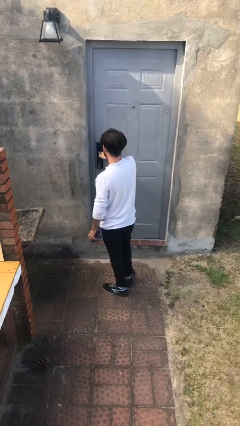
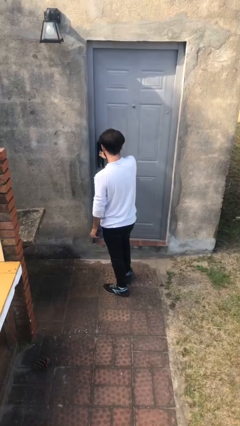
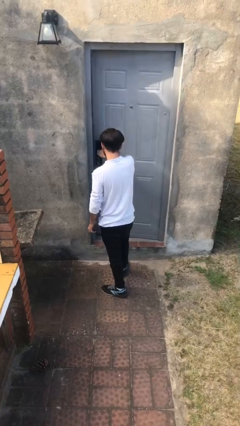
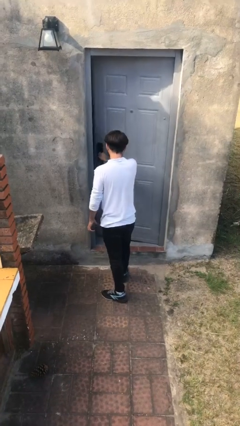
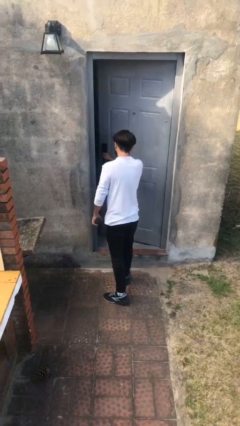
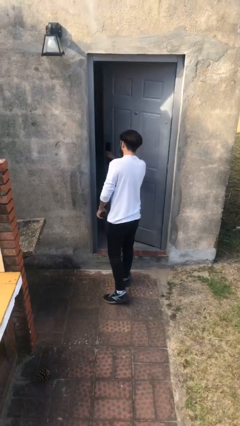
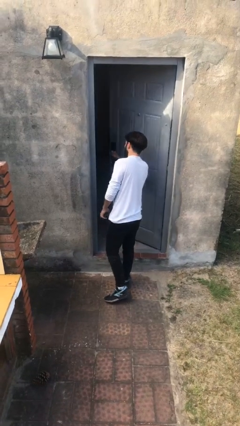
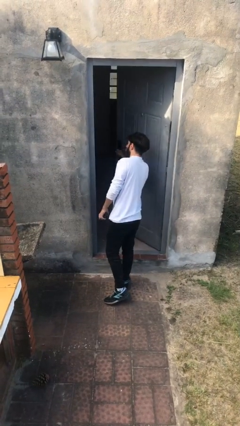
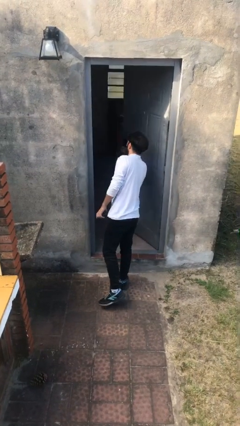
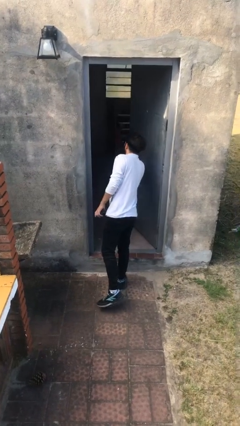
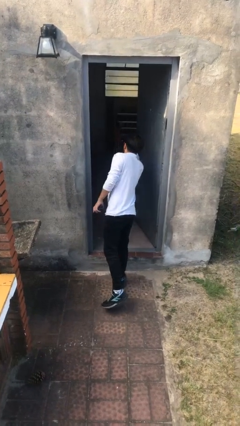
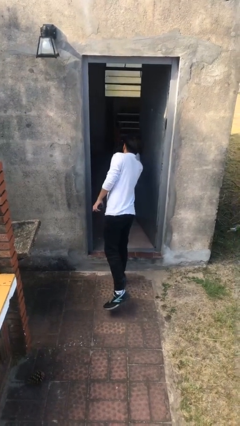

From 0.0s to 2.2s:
person opens facility door

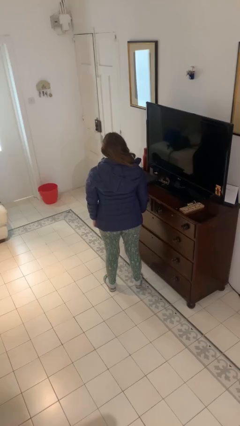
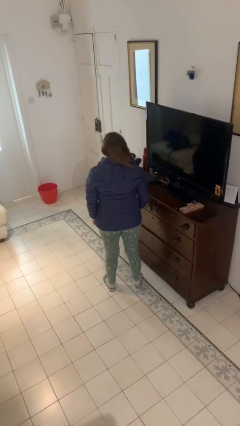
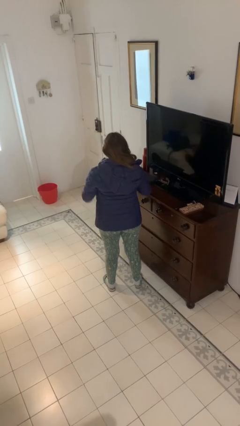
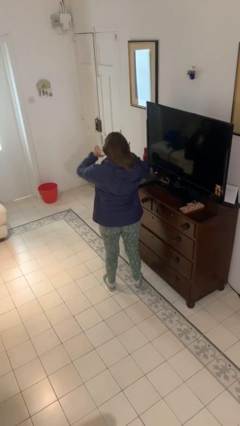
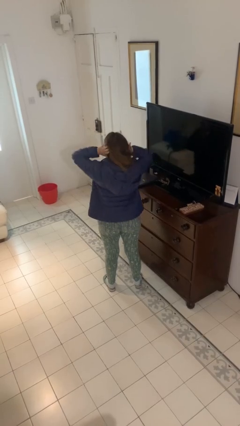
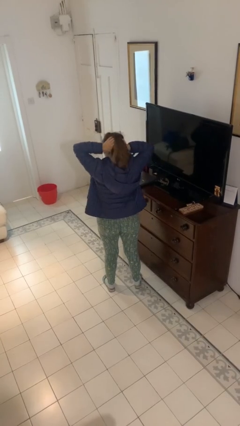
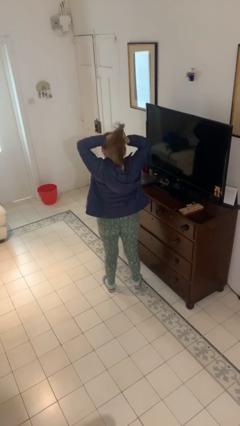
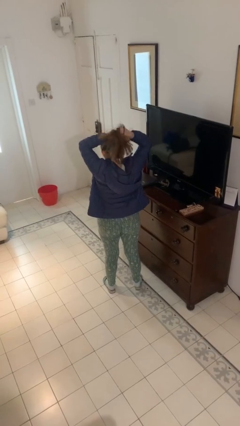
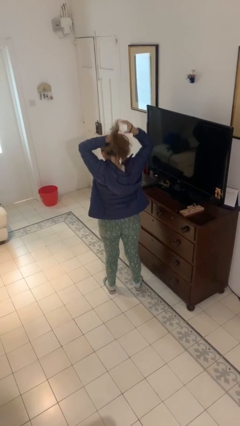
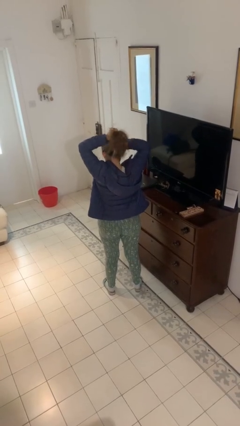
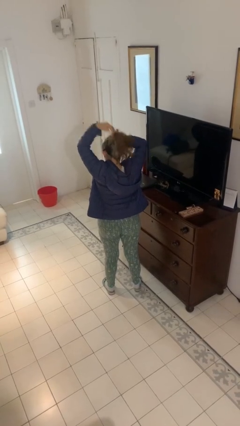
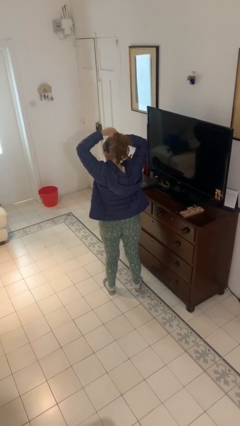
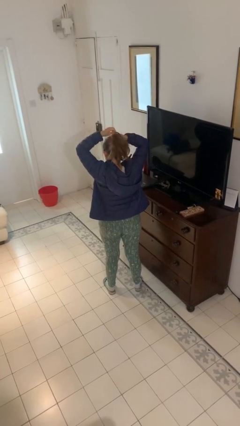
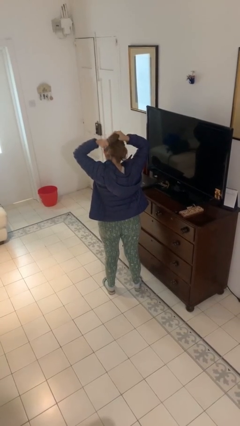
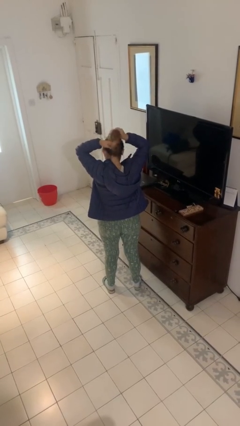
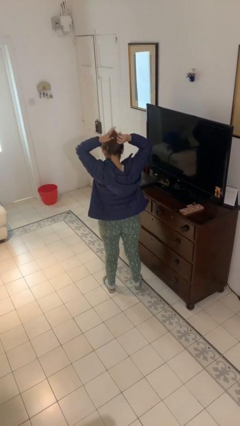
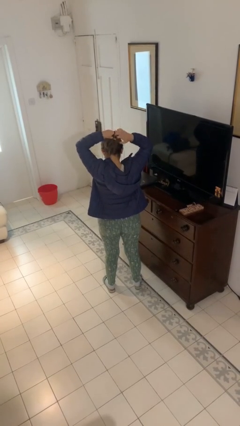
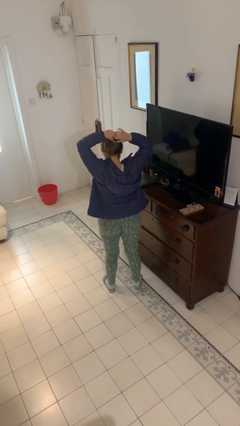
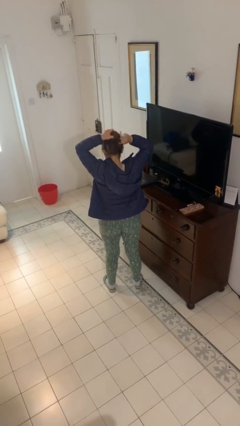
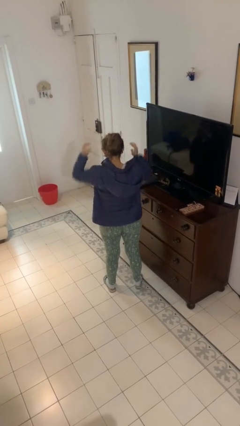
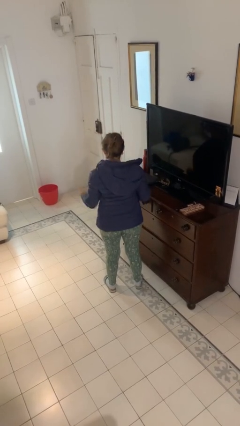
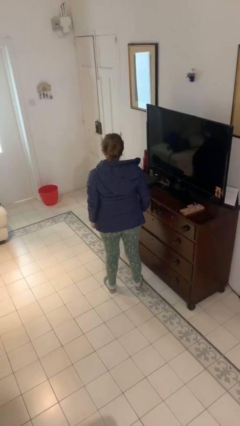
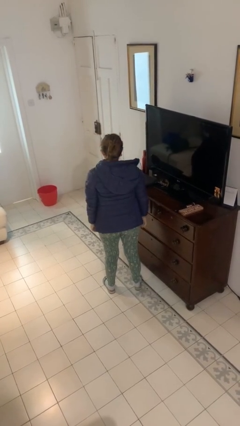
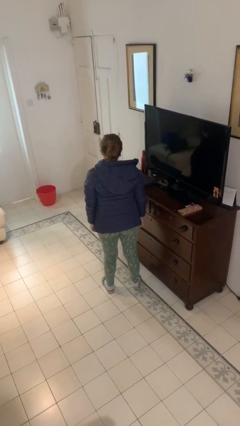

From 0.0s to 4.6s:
person puts hair in ponytail

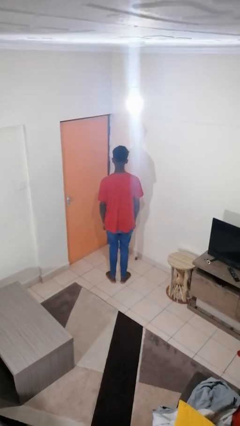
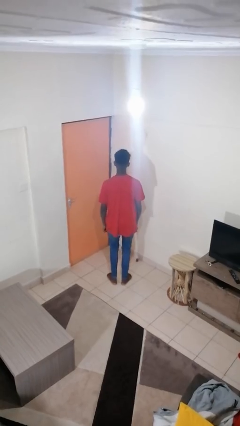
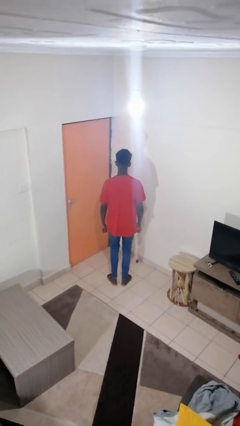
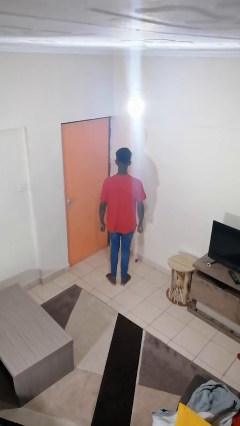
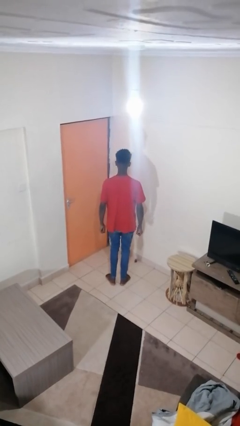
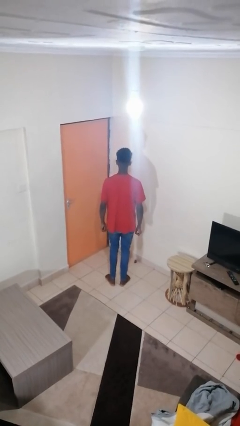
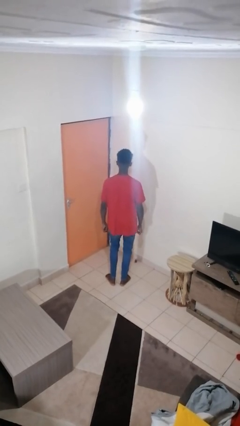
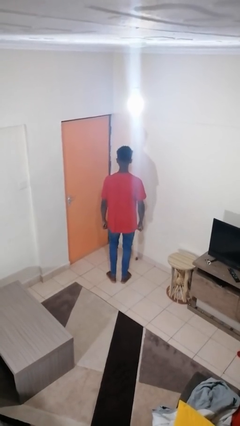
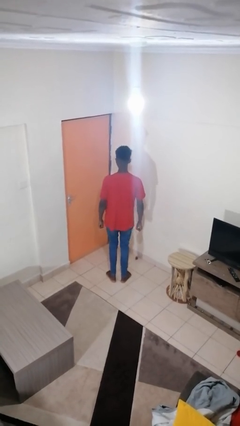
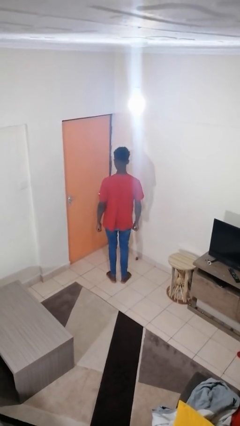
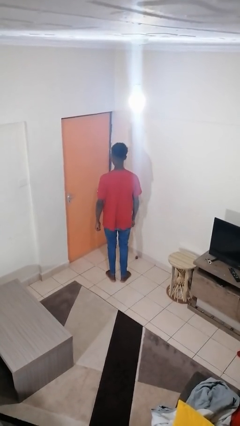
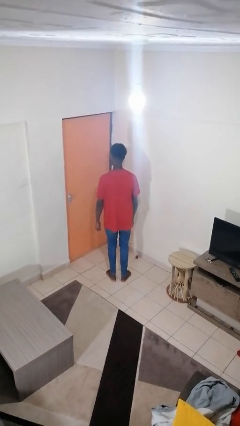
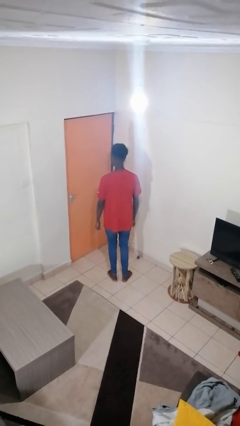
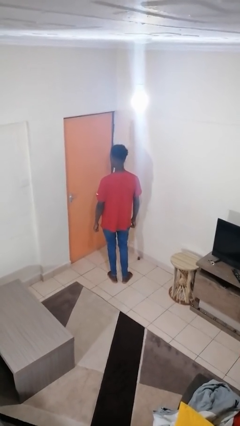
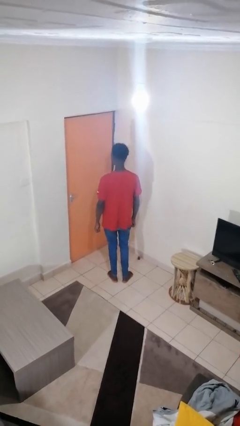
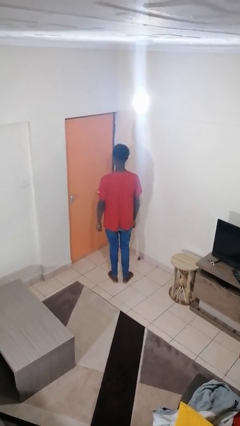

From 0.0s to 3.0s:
person wiggles hips

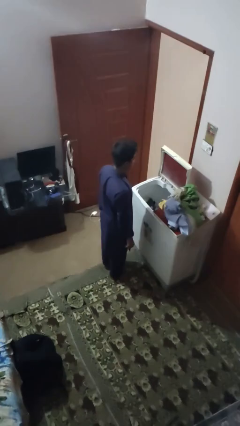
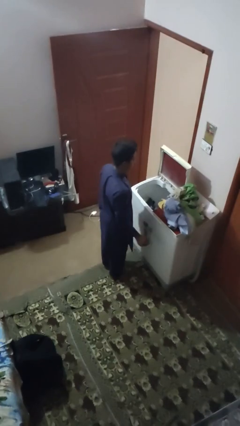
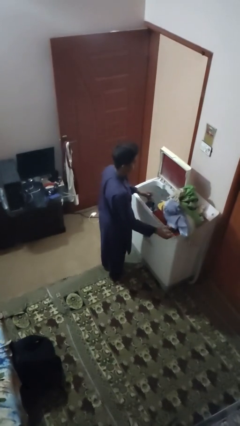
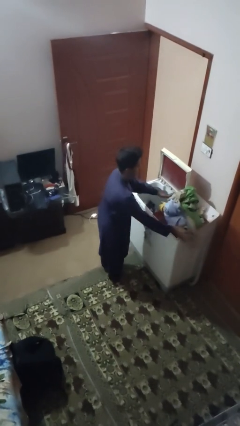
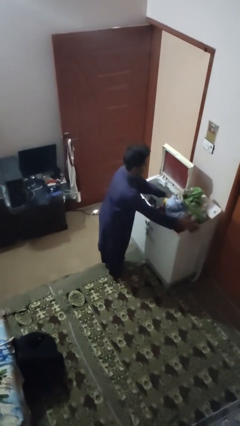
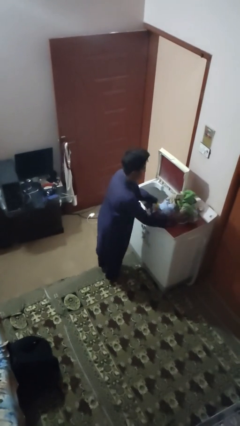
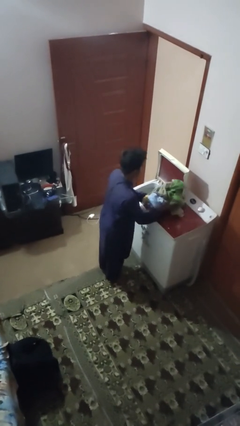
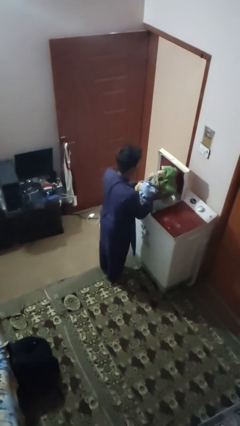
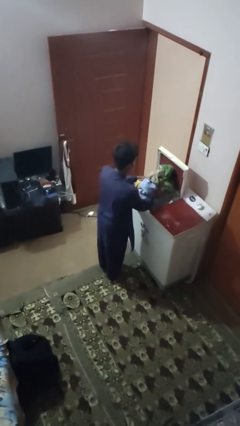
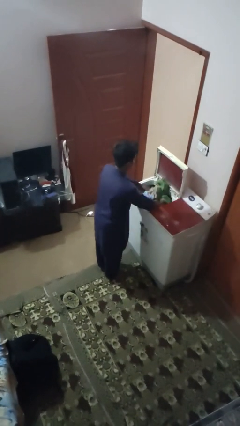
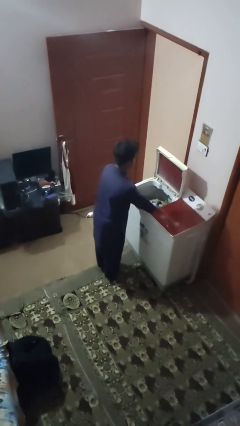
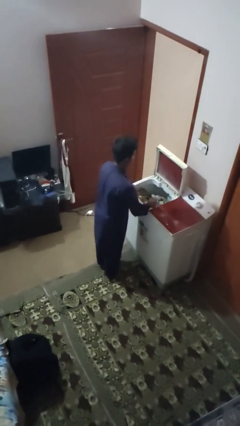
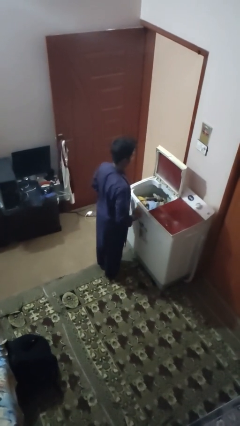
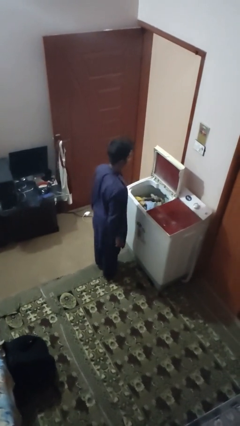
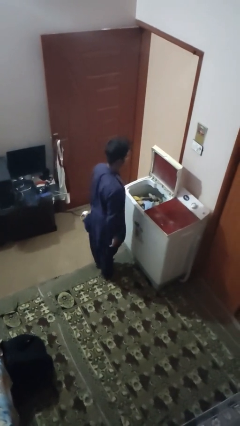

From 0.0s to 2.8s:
person loads clotheswasher

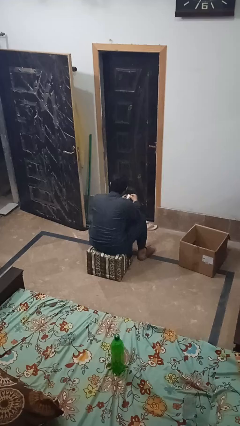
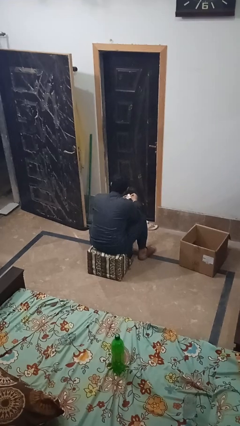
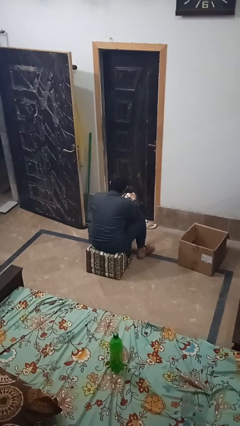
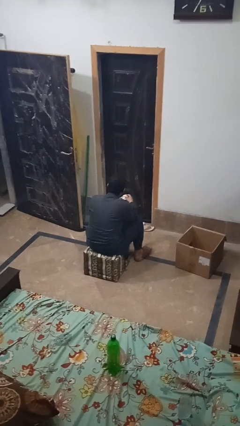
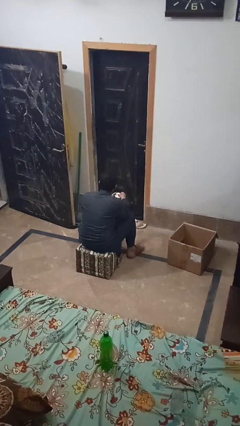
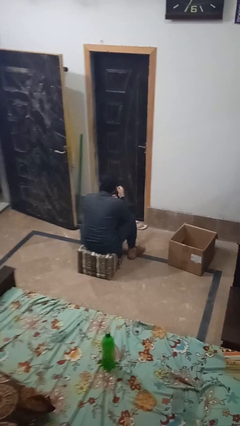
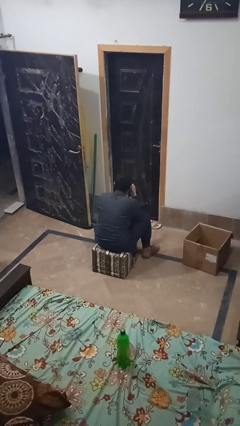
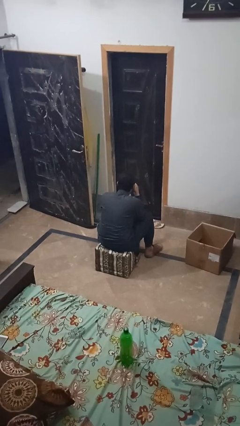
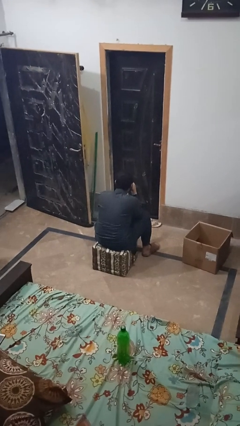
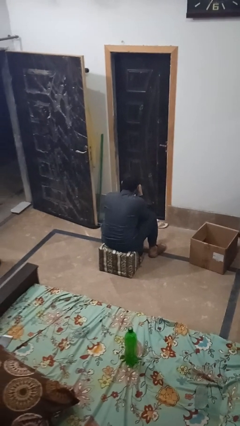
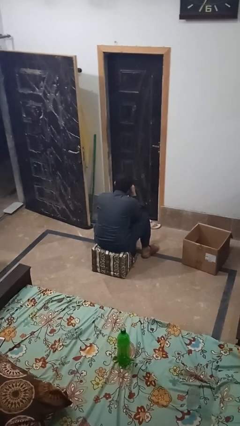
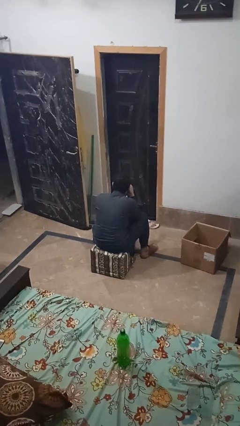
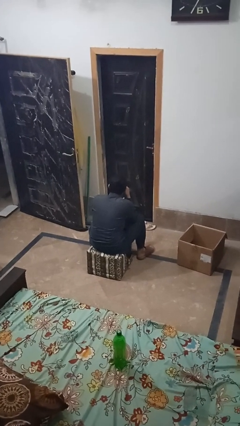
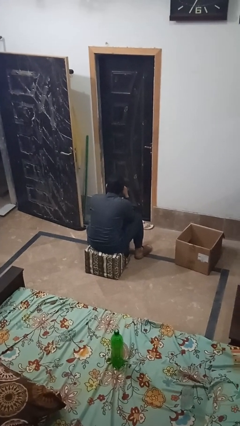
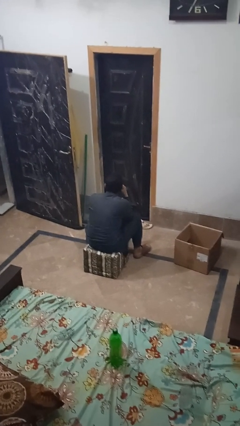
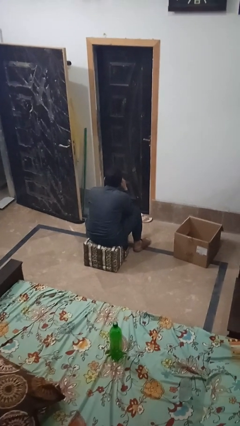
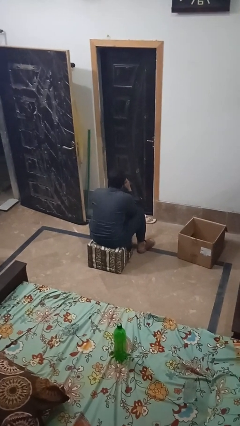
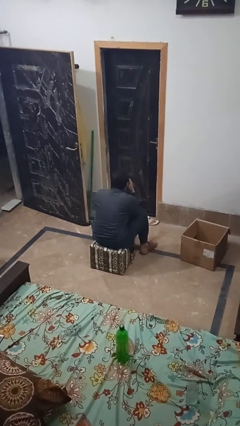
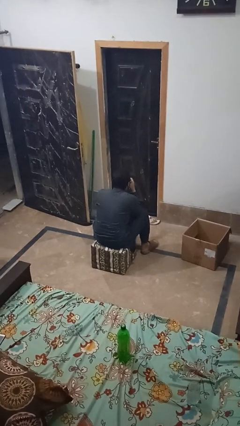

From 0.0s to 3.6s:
person blows nose

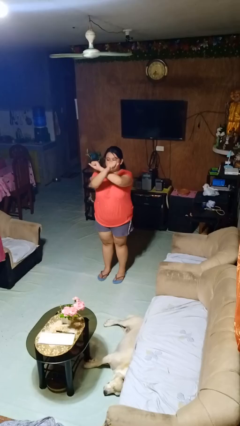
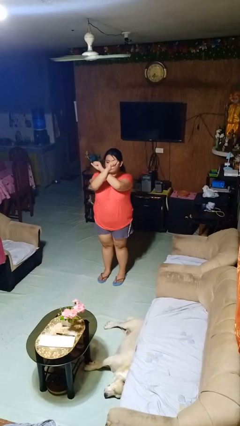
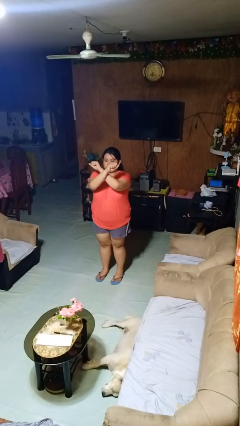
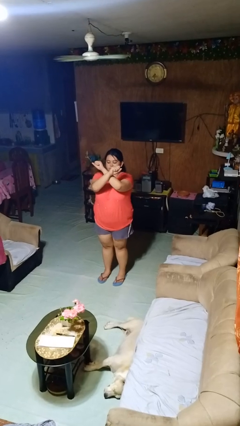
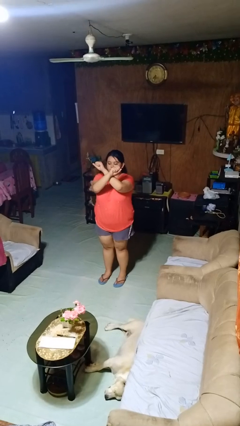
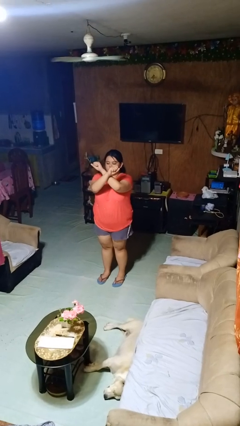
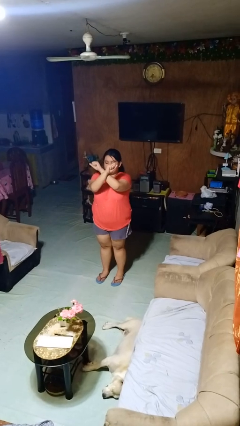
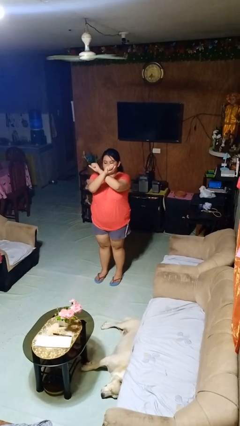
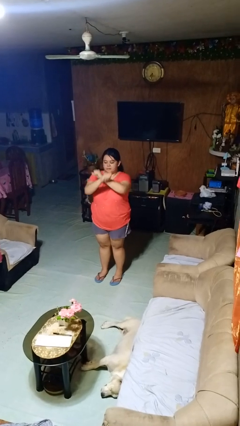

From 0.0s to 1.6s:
person gestures arms x
